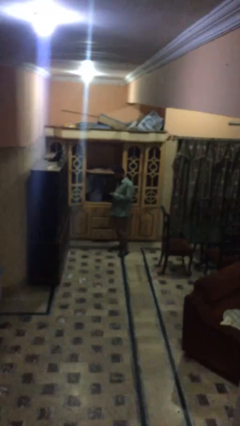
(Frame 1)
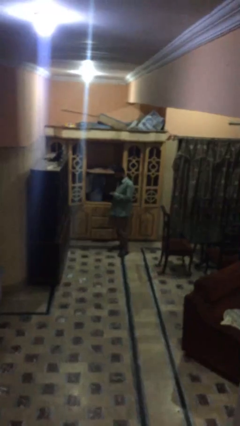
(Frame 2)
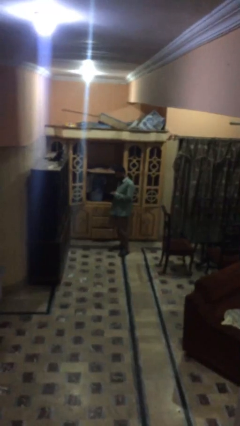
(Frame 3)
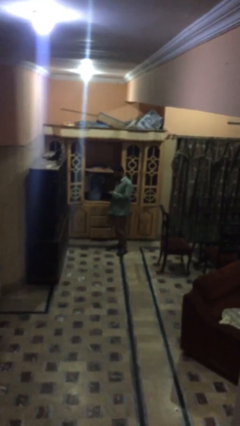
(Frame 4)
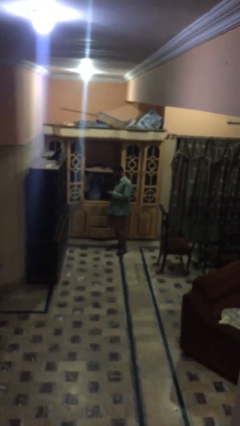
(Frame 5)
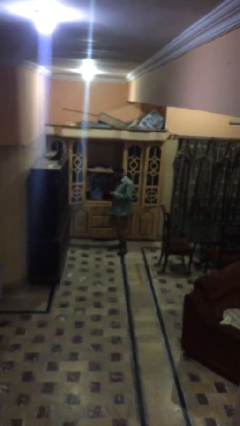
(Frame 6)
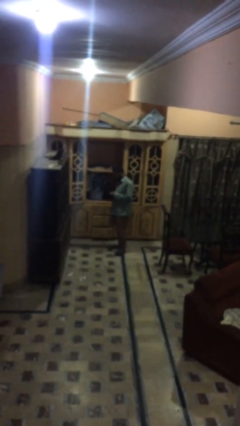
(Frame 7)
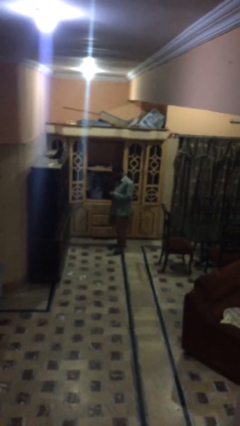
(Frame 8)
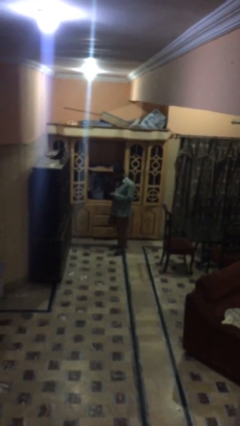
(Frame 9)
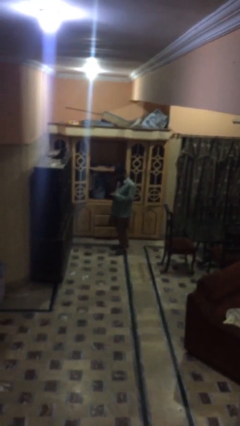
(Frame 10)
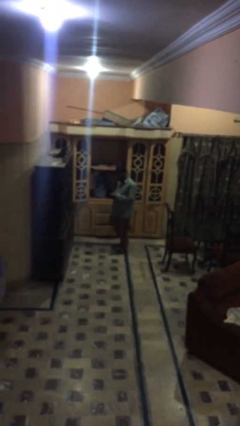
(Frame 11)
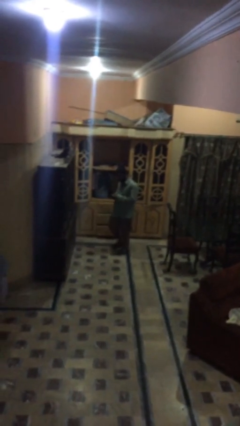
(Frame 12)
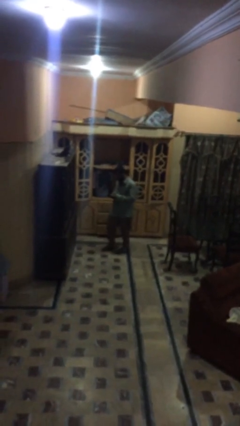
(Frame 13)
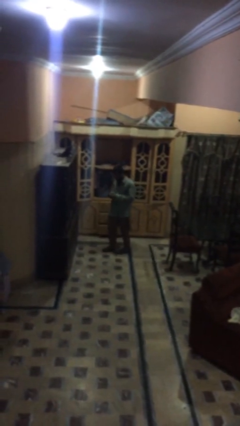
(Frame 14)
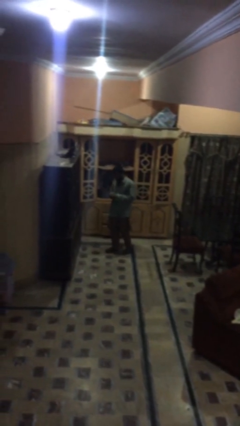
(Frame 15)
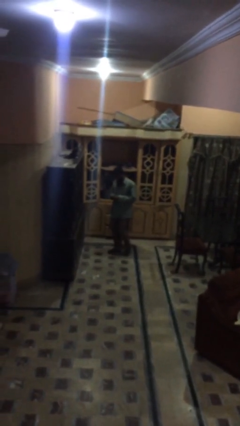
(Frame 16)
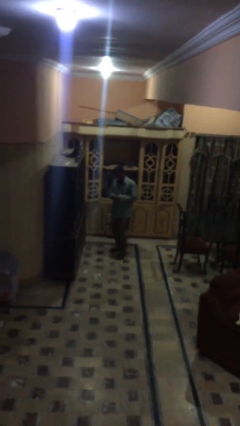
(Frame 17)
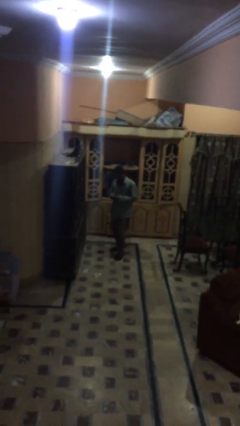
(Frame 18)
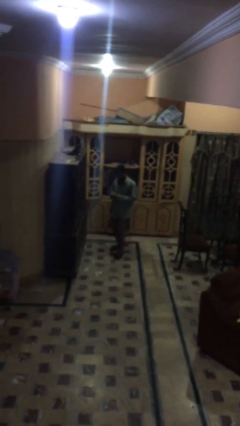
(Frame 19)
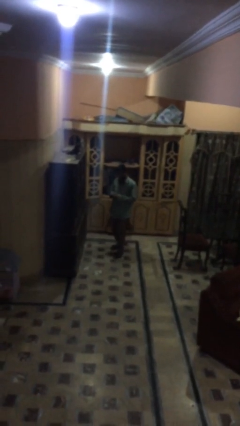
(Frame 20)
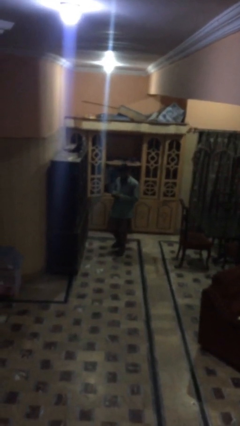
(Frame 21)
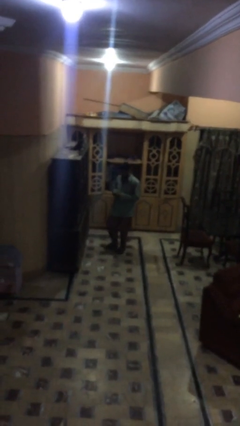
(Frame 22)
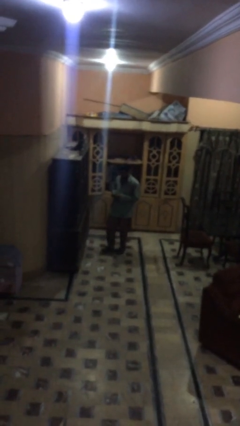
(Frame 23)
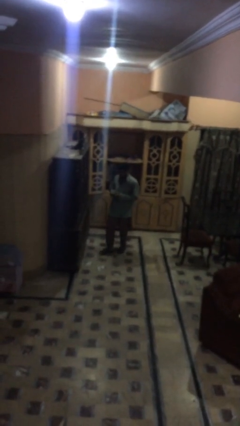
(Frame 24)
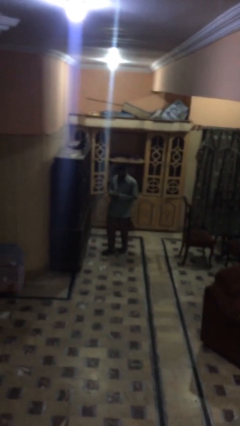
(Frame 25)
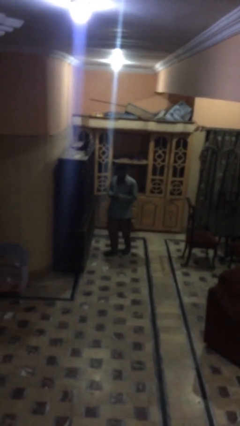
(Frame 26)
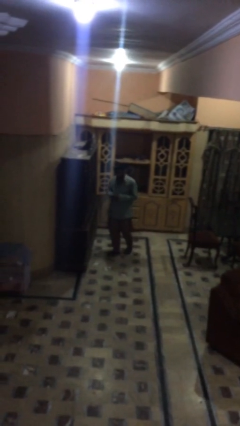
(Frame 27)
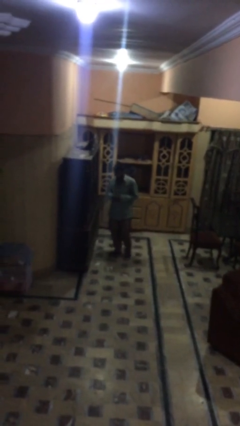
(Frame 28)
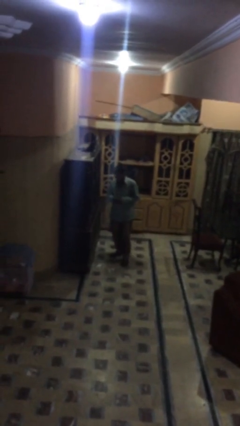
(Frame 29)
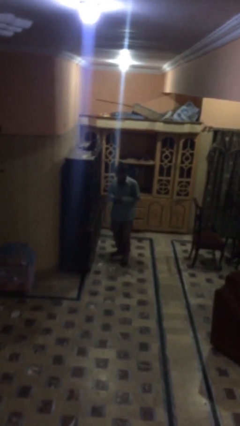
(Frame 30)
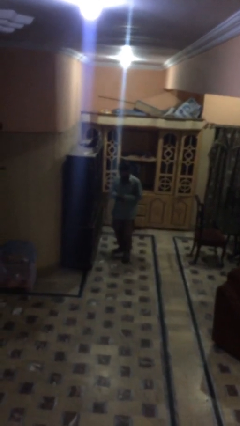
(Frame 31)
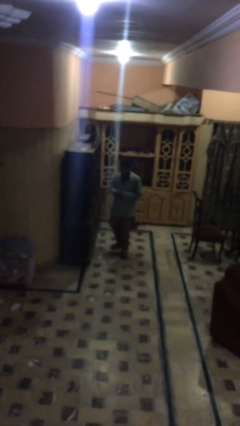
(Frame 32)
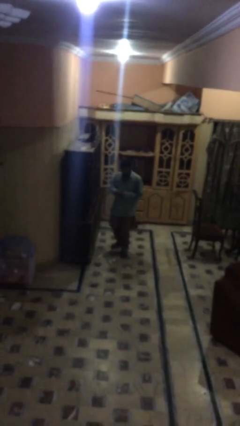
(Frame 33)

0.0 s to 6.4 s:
person texts on phone

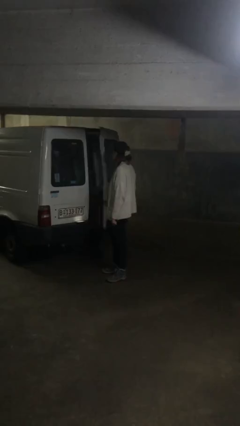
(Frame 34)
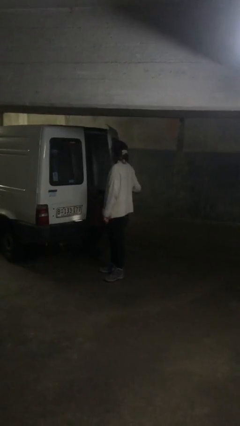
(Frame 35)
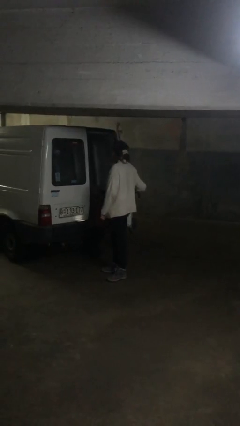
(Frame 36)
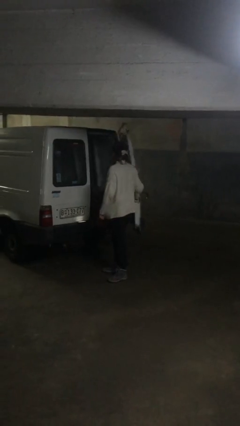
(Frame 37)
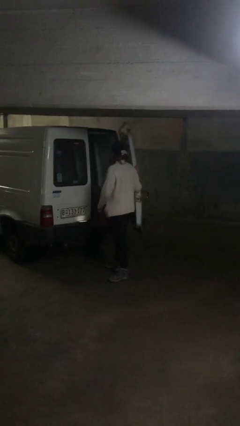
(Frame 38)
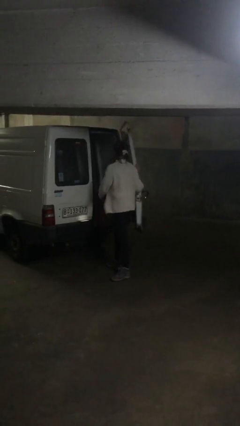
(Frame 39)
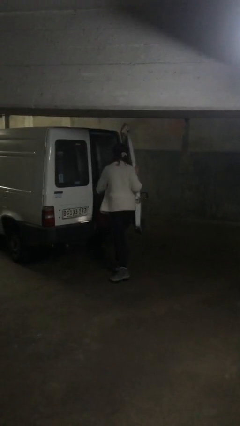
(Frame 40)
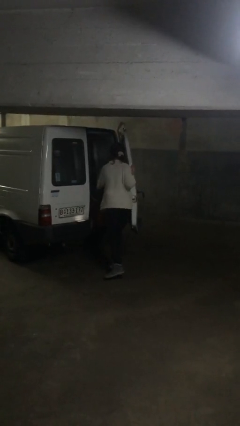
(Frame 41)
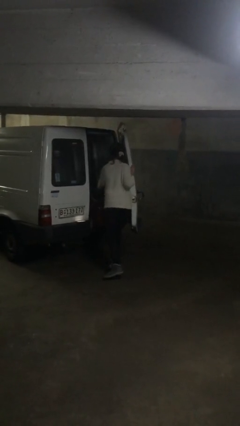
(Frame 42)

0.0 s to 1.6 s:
person opens car door

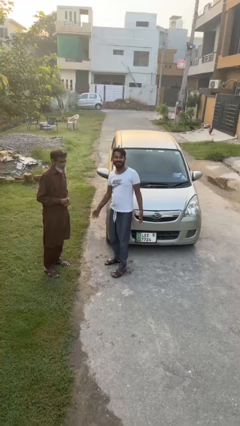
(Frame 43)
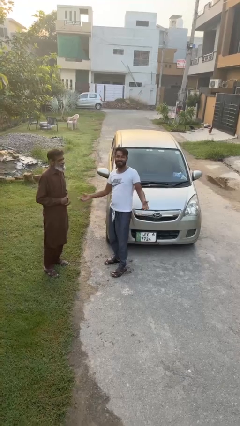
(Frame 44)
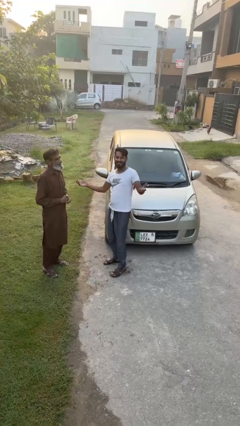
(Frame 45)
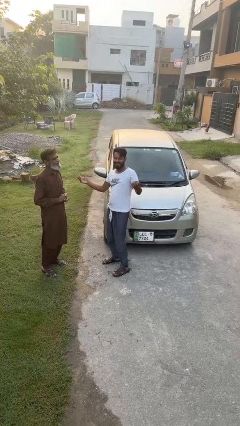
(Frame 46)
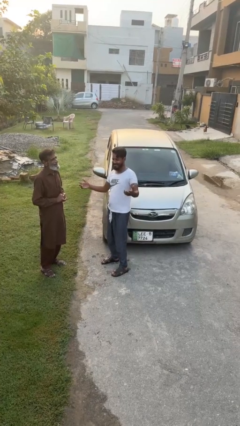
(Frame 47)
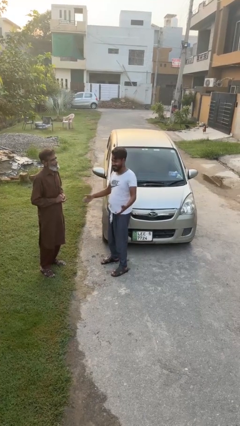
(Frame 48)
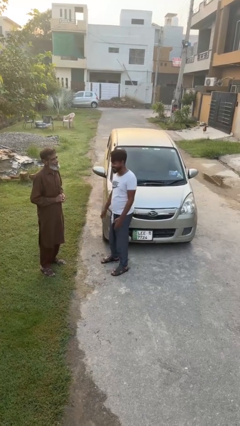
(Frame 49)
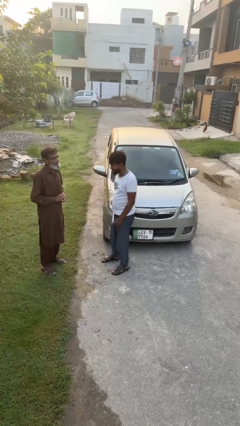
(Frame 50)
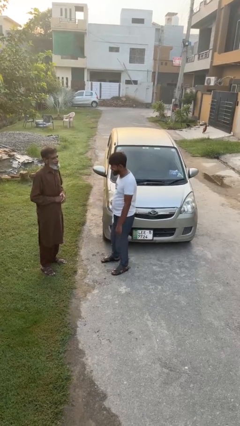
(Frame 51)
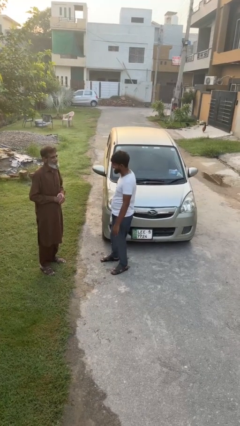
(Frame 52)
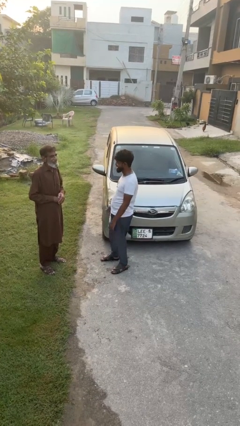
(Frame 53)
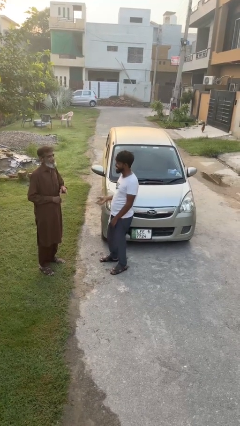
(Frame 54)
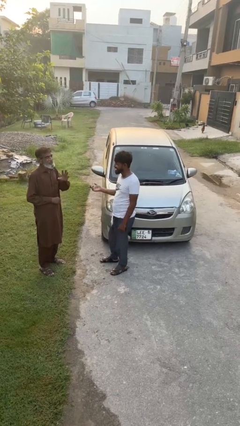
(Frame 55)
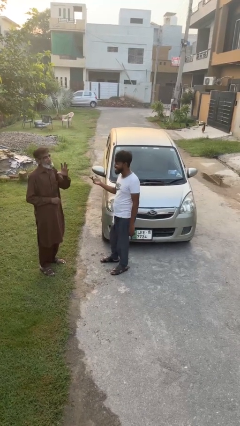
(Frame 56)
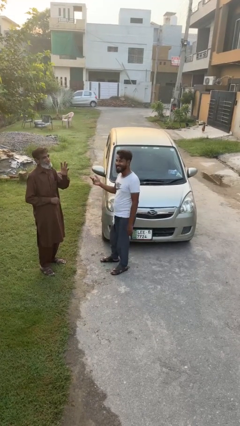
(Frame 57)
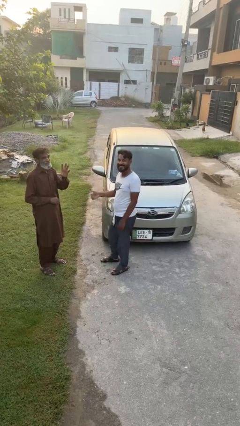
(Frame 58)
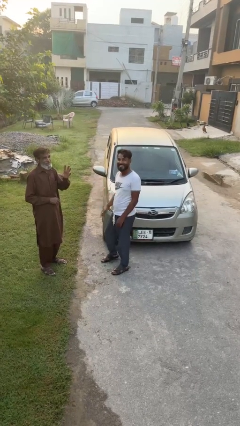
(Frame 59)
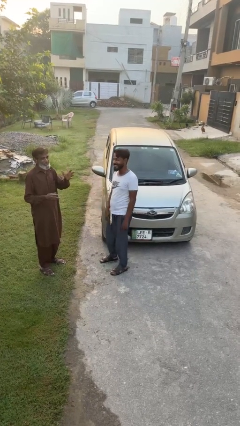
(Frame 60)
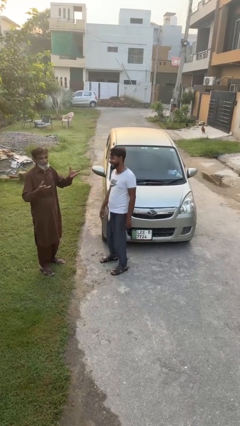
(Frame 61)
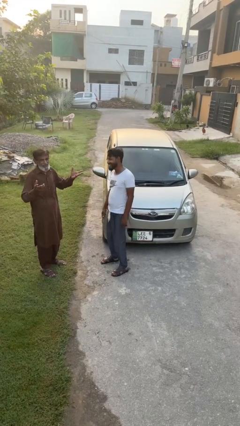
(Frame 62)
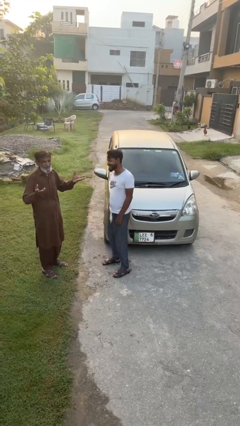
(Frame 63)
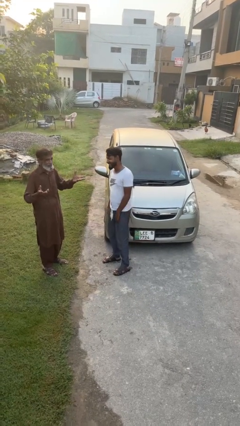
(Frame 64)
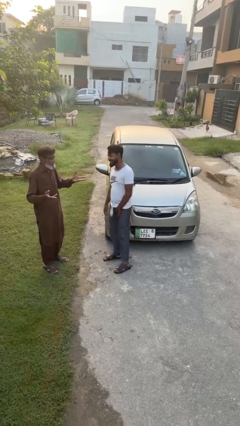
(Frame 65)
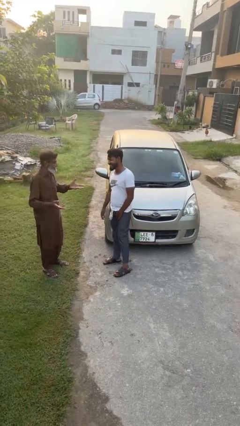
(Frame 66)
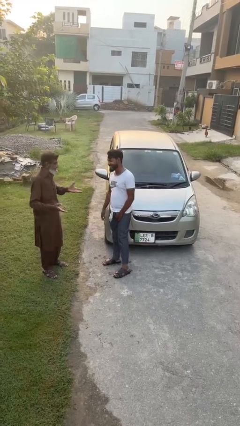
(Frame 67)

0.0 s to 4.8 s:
person laughs with person

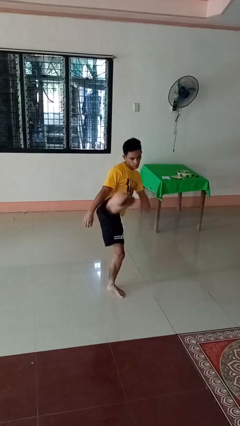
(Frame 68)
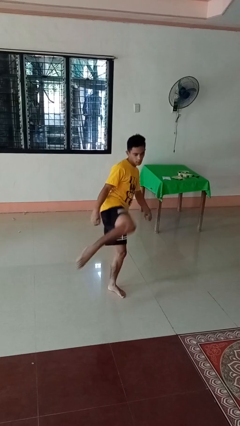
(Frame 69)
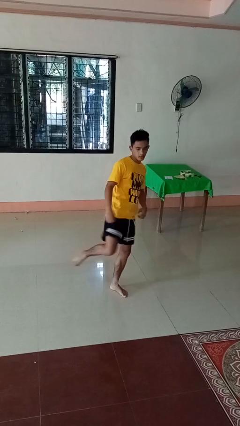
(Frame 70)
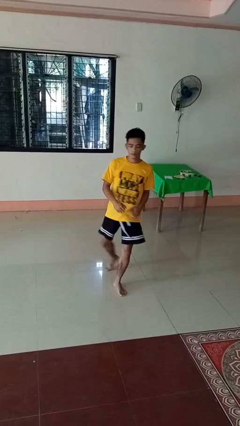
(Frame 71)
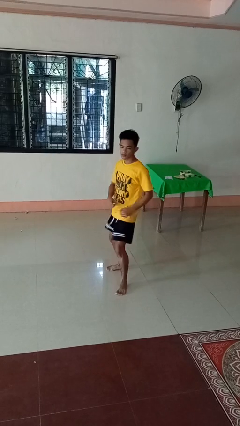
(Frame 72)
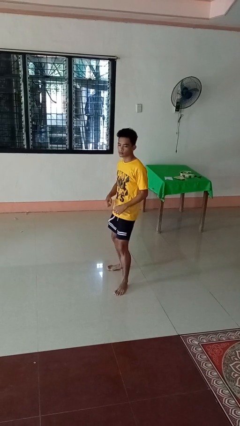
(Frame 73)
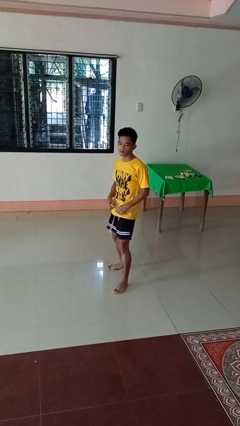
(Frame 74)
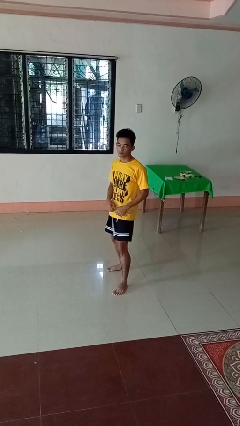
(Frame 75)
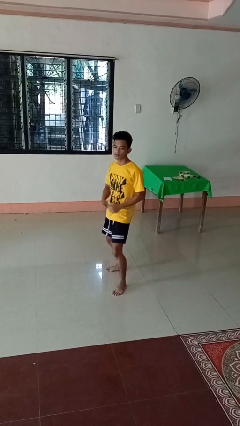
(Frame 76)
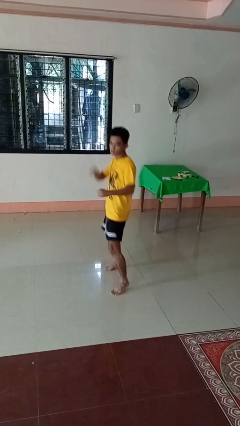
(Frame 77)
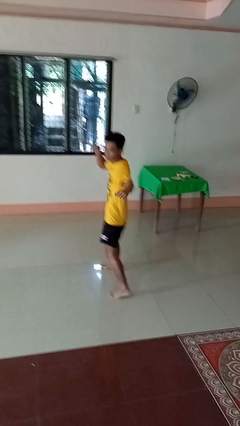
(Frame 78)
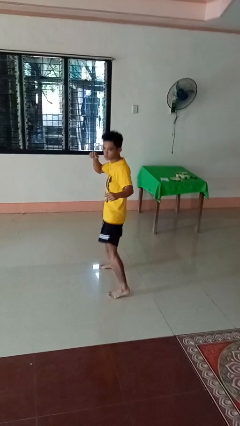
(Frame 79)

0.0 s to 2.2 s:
person karate kicks

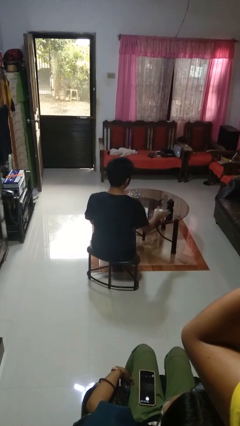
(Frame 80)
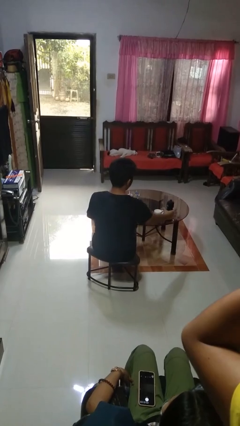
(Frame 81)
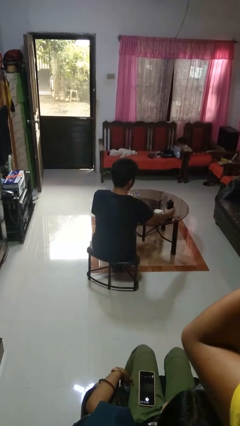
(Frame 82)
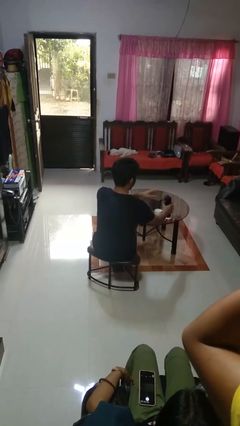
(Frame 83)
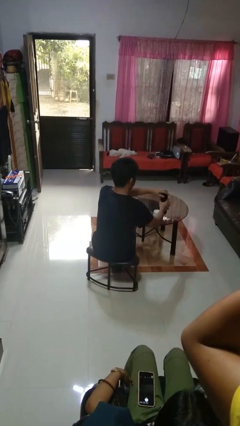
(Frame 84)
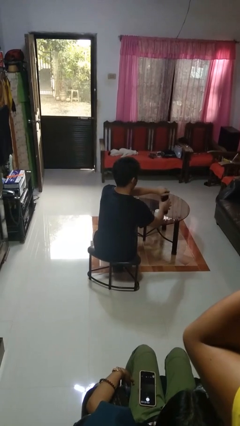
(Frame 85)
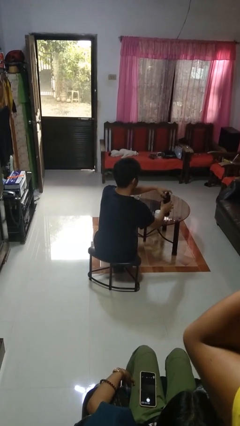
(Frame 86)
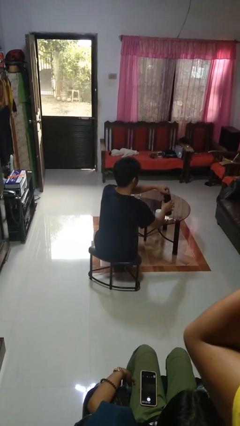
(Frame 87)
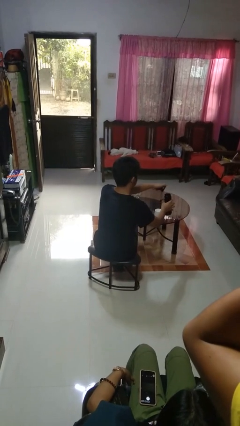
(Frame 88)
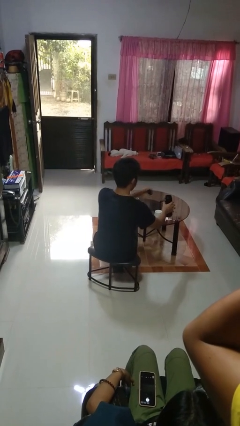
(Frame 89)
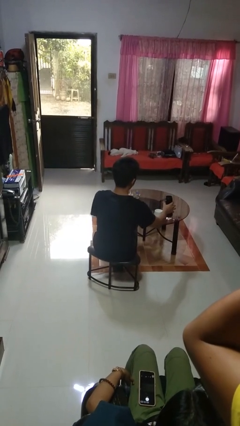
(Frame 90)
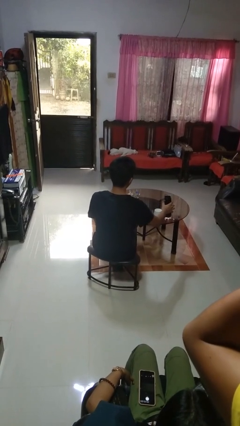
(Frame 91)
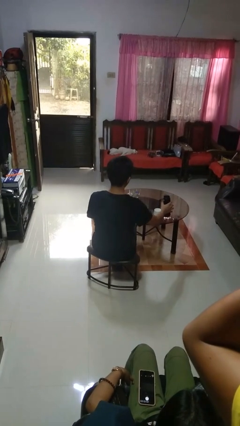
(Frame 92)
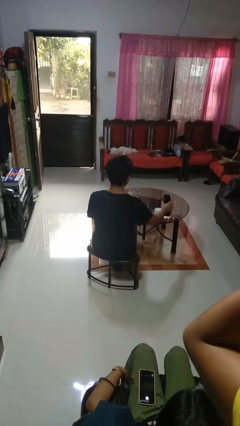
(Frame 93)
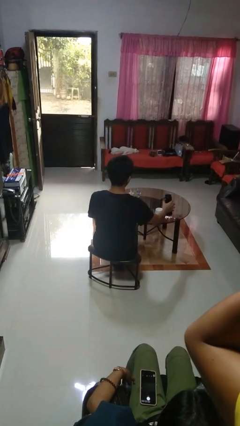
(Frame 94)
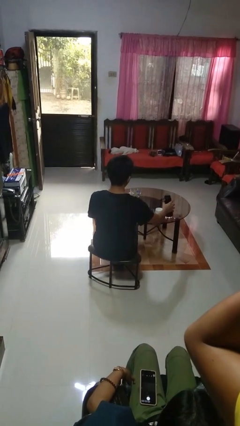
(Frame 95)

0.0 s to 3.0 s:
person unscrews lid from bottle
